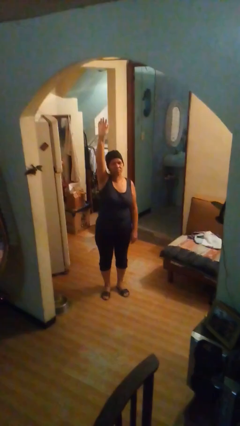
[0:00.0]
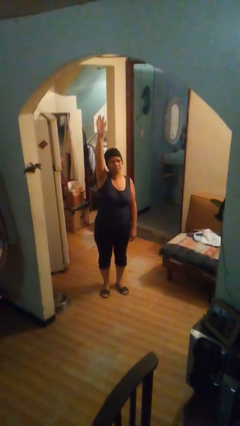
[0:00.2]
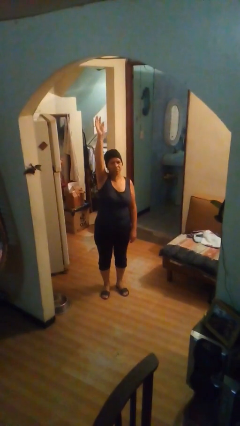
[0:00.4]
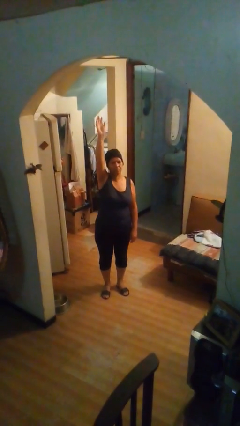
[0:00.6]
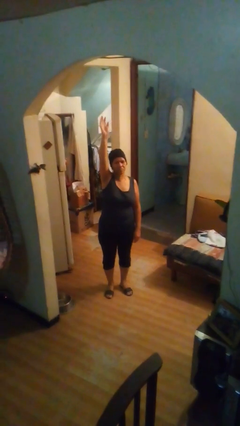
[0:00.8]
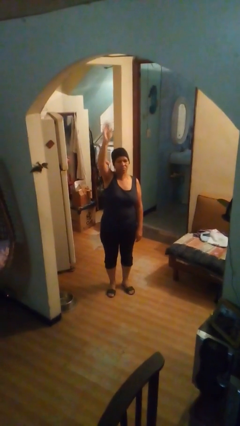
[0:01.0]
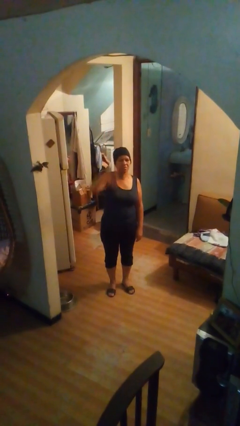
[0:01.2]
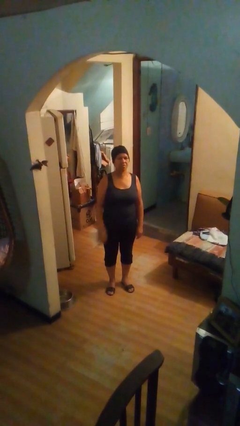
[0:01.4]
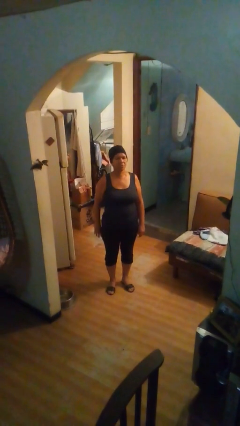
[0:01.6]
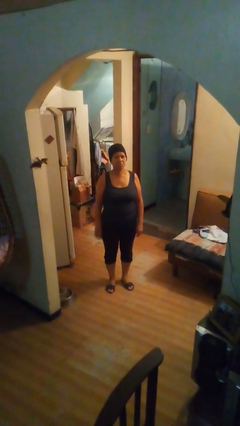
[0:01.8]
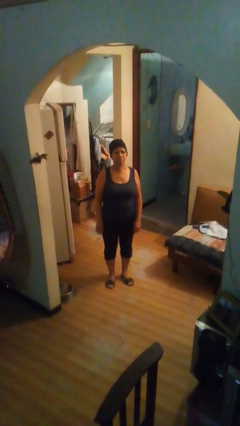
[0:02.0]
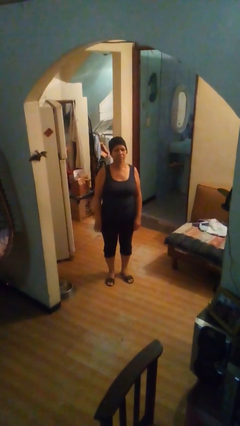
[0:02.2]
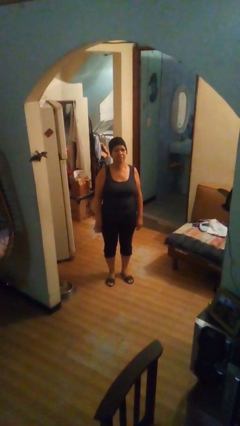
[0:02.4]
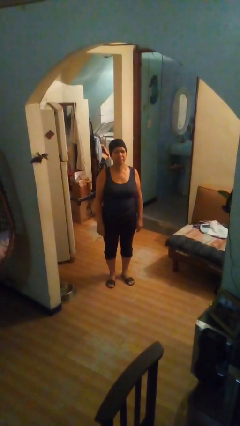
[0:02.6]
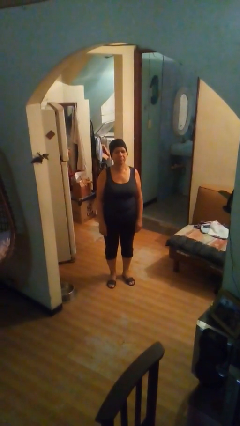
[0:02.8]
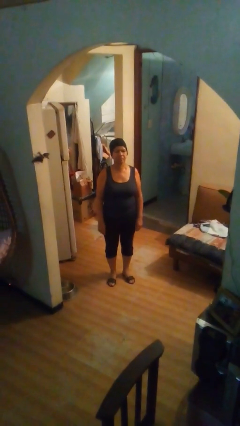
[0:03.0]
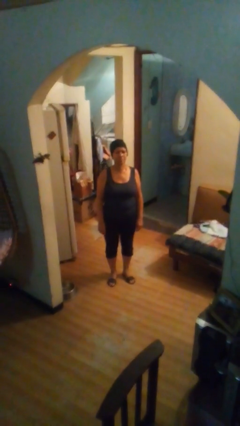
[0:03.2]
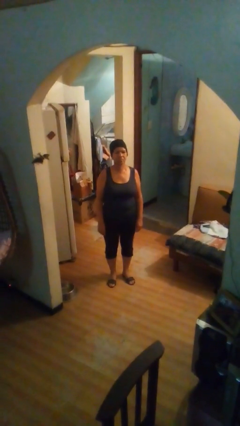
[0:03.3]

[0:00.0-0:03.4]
person gestures lower hand

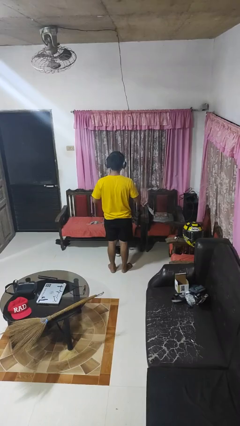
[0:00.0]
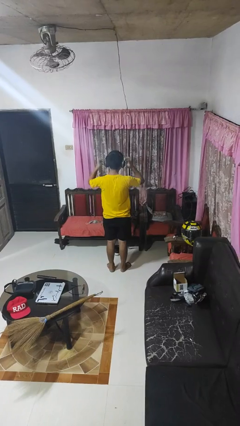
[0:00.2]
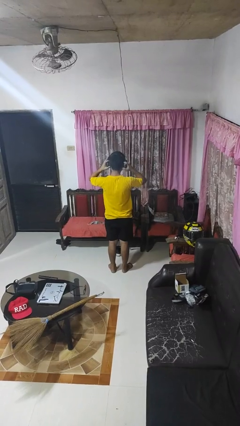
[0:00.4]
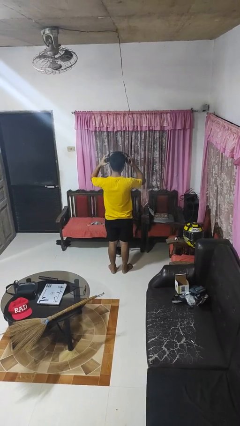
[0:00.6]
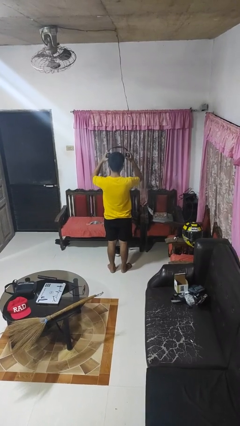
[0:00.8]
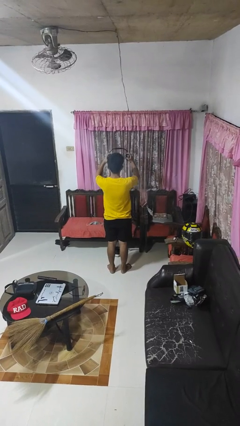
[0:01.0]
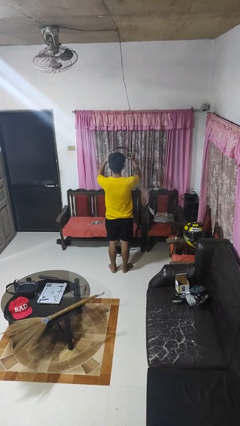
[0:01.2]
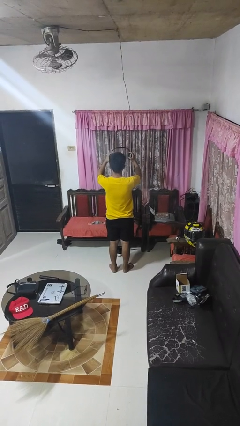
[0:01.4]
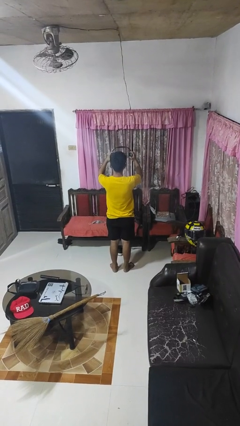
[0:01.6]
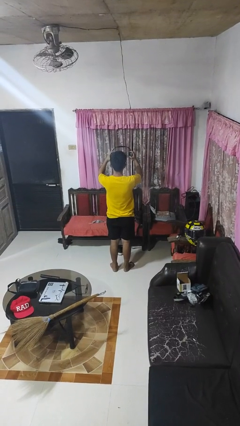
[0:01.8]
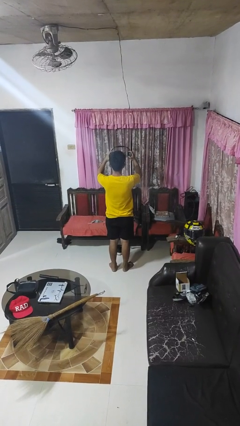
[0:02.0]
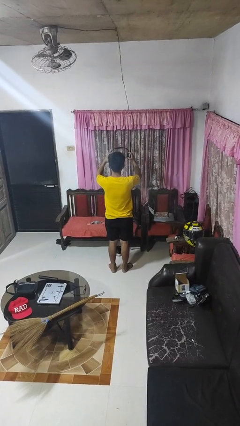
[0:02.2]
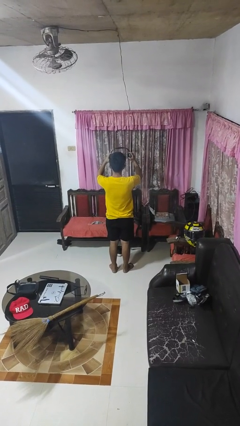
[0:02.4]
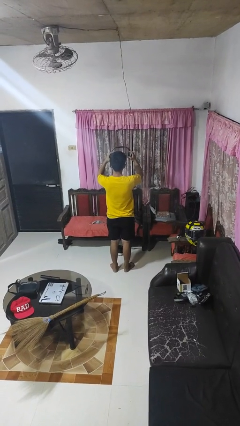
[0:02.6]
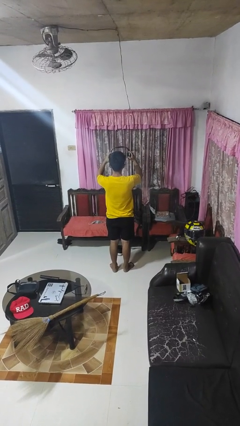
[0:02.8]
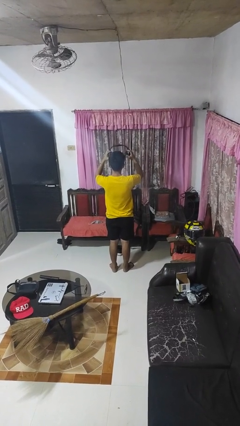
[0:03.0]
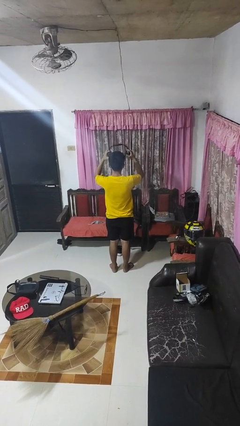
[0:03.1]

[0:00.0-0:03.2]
person takes off headphones

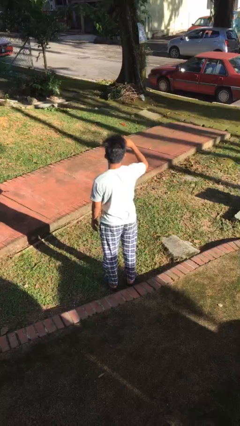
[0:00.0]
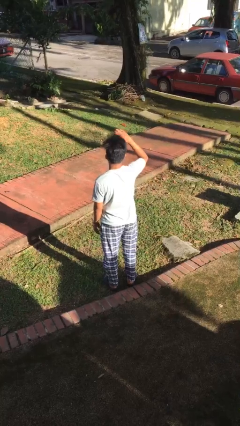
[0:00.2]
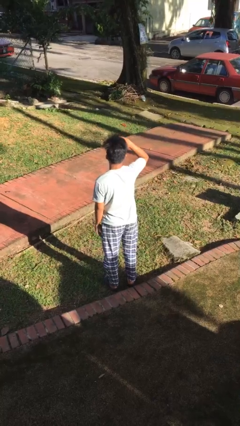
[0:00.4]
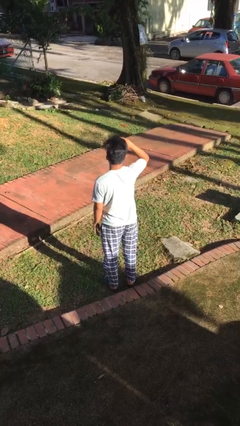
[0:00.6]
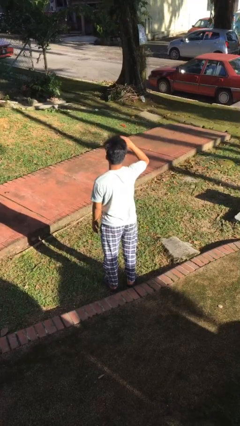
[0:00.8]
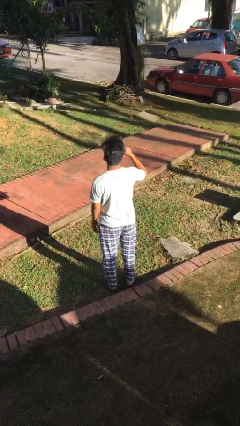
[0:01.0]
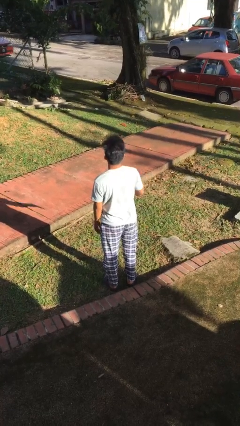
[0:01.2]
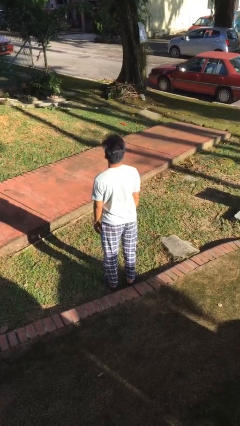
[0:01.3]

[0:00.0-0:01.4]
person salutes

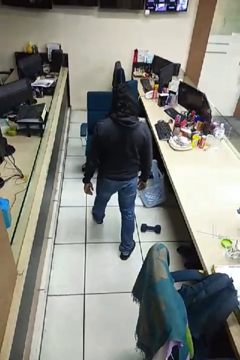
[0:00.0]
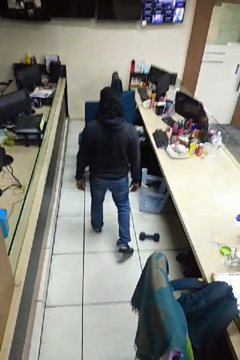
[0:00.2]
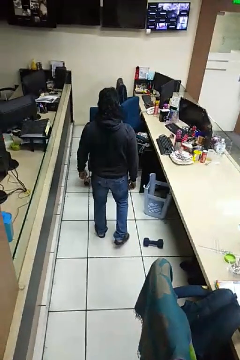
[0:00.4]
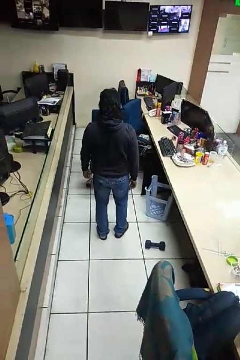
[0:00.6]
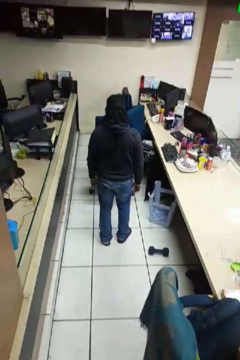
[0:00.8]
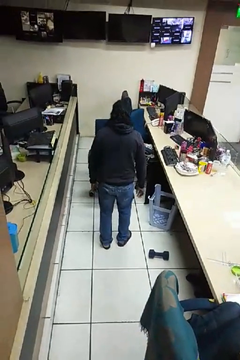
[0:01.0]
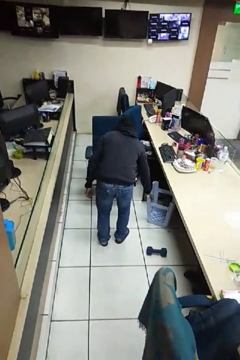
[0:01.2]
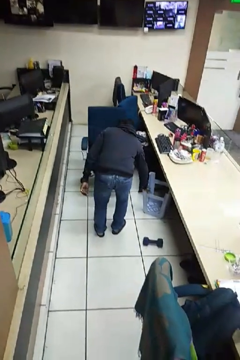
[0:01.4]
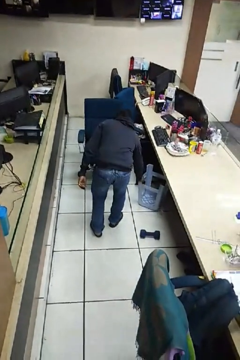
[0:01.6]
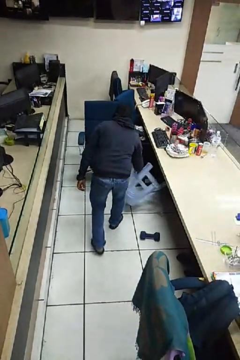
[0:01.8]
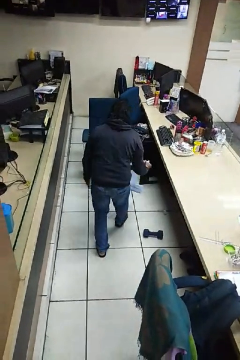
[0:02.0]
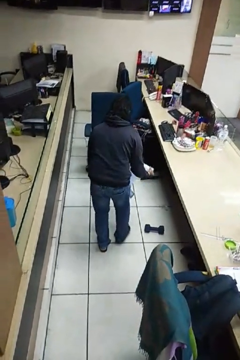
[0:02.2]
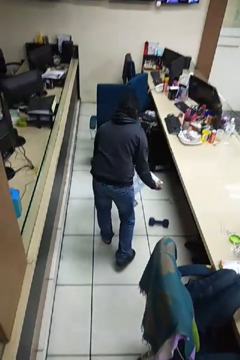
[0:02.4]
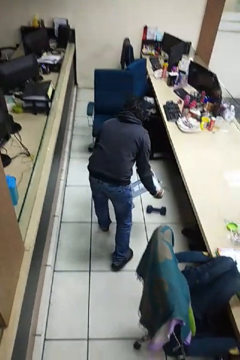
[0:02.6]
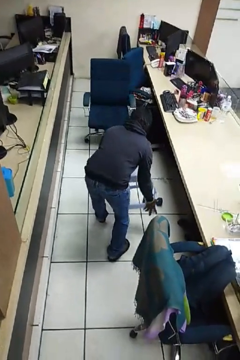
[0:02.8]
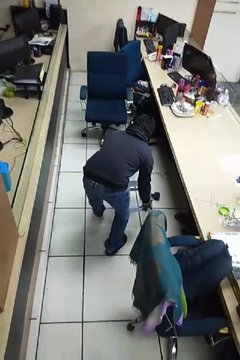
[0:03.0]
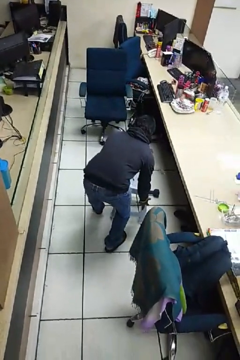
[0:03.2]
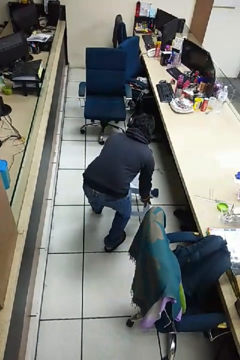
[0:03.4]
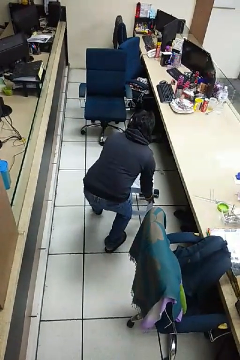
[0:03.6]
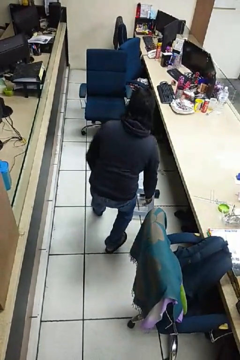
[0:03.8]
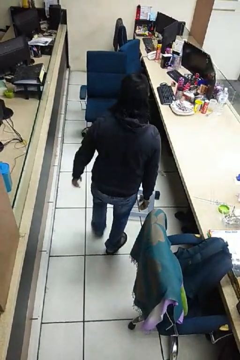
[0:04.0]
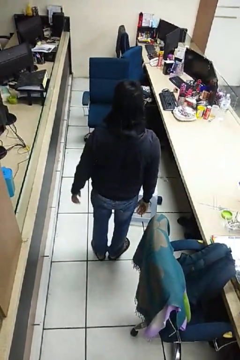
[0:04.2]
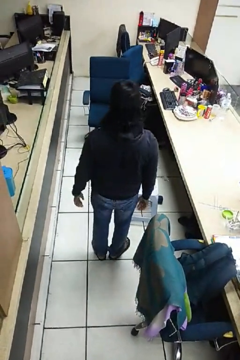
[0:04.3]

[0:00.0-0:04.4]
person sets upright furniture

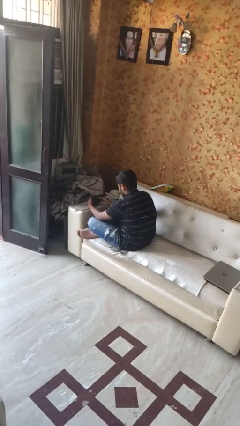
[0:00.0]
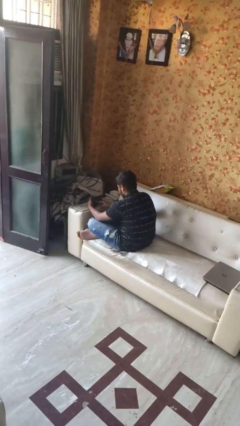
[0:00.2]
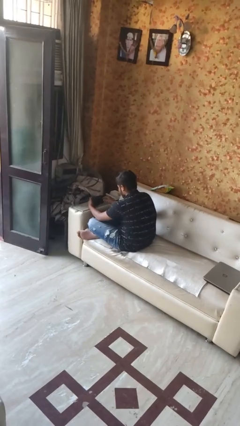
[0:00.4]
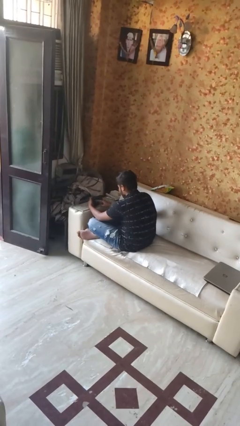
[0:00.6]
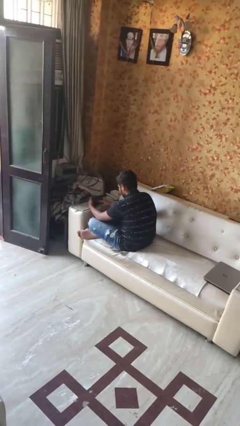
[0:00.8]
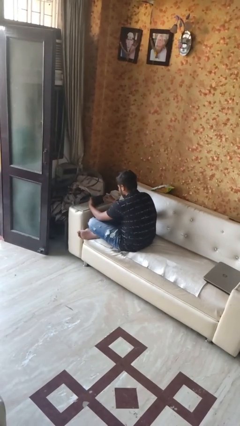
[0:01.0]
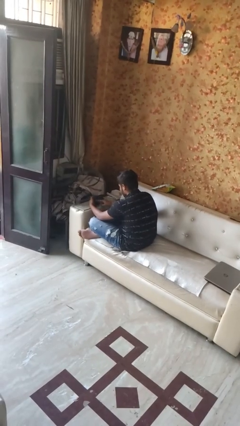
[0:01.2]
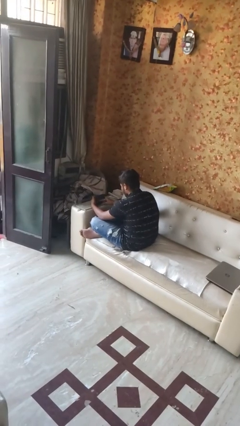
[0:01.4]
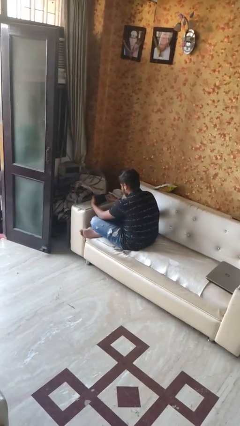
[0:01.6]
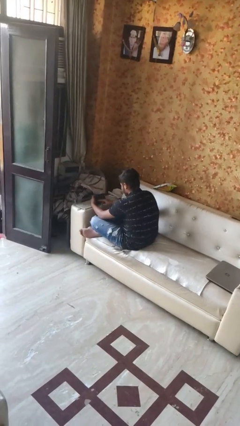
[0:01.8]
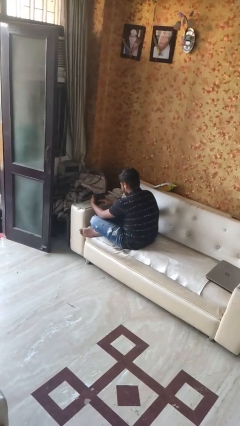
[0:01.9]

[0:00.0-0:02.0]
person interacts with tablet

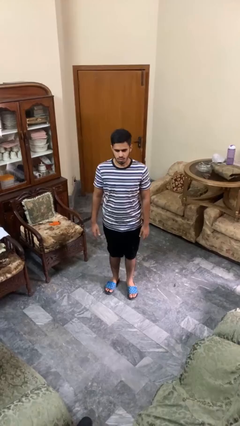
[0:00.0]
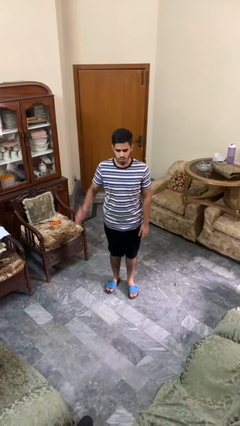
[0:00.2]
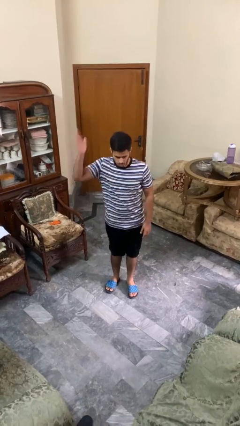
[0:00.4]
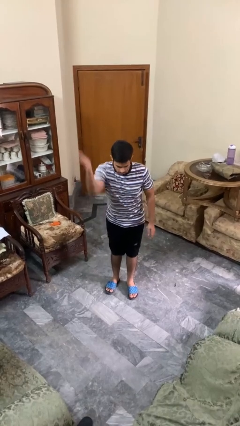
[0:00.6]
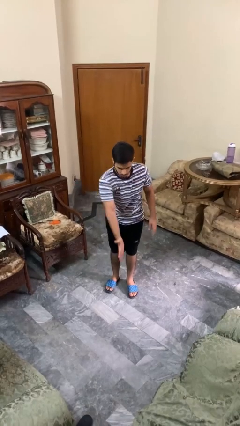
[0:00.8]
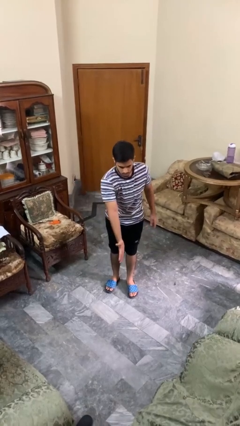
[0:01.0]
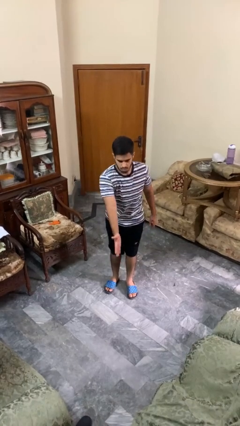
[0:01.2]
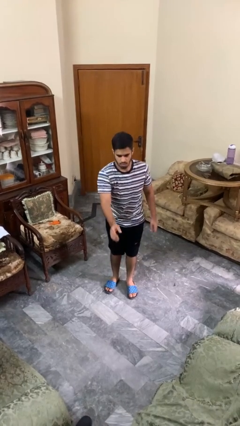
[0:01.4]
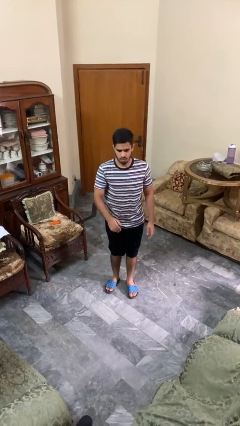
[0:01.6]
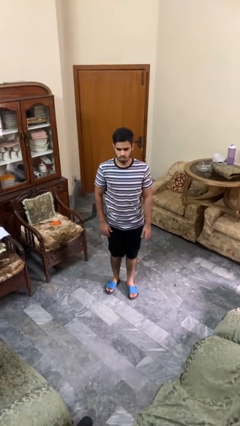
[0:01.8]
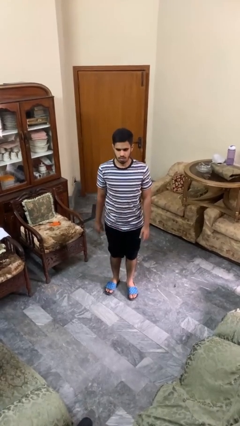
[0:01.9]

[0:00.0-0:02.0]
person karate chop

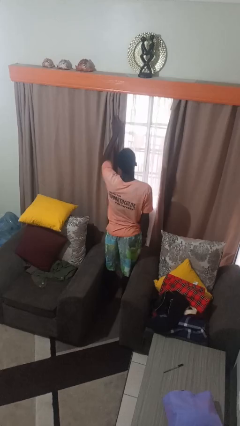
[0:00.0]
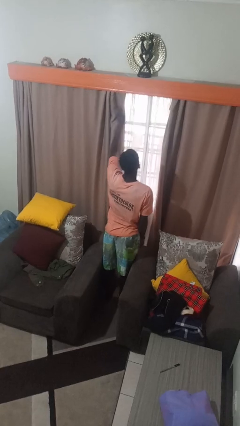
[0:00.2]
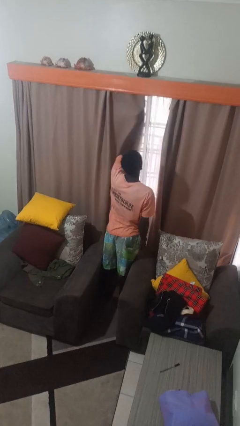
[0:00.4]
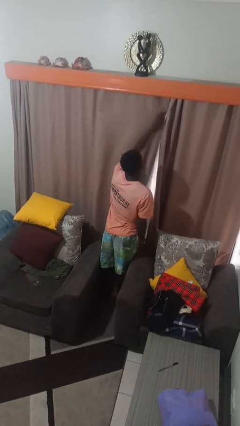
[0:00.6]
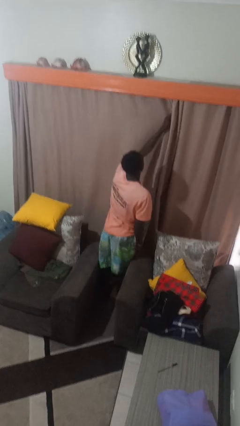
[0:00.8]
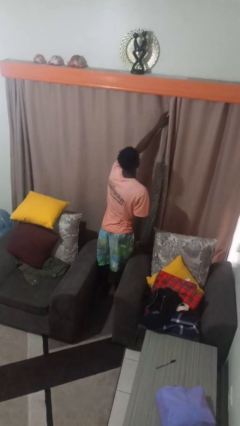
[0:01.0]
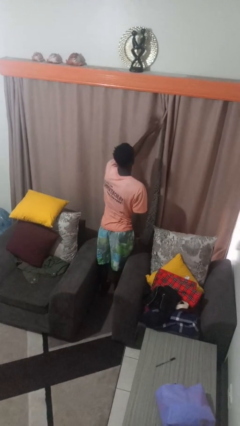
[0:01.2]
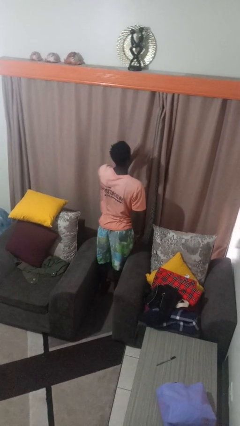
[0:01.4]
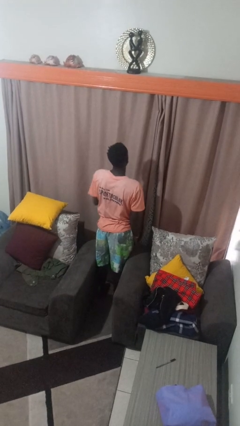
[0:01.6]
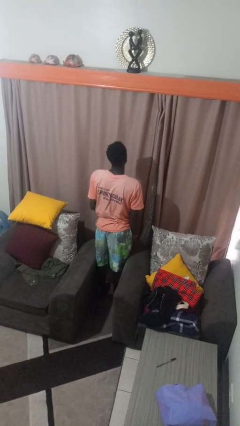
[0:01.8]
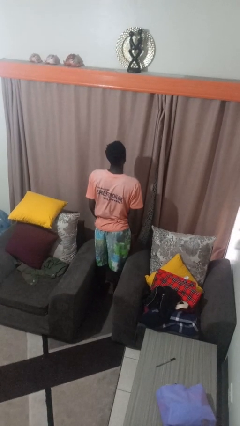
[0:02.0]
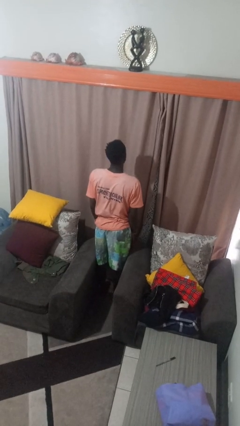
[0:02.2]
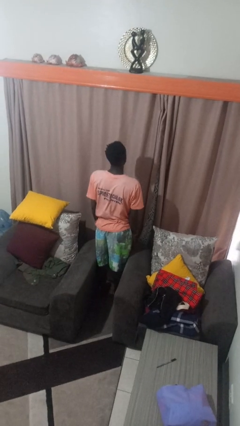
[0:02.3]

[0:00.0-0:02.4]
person closes curtains
